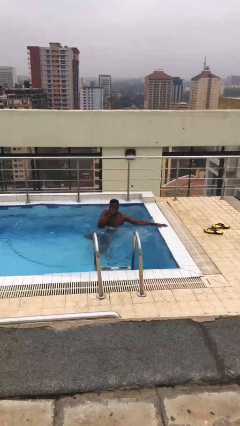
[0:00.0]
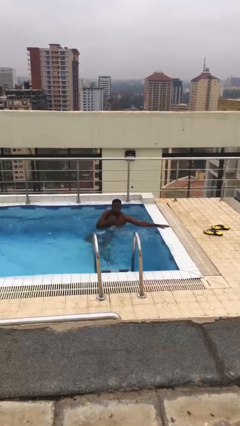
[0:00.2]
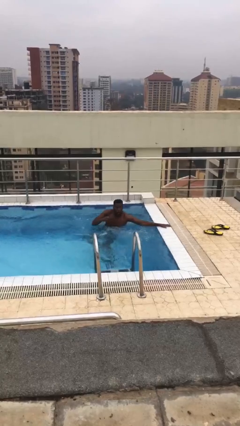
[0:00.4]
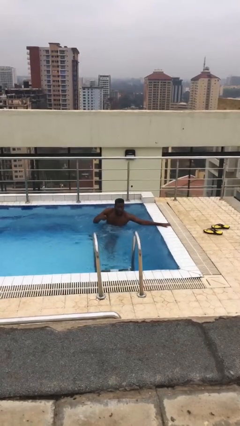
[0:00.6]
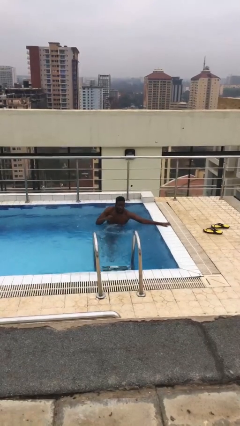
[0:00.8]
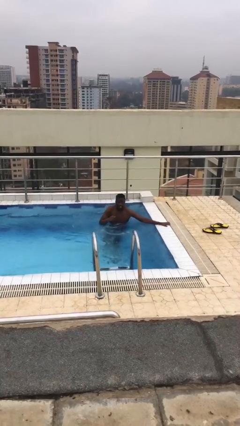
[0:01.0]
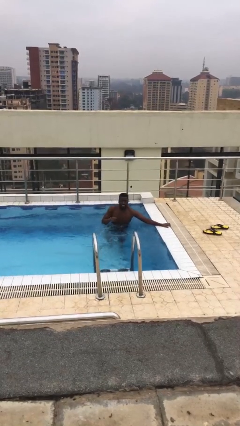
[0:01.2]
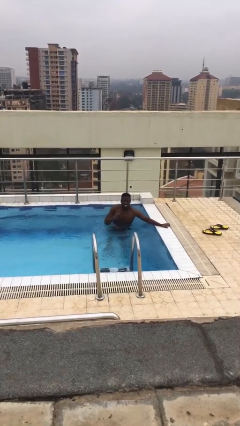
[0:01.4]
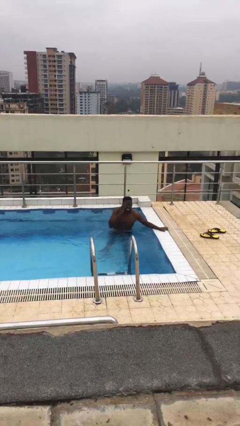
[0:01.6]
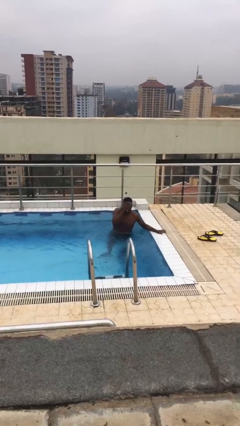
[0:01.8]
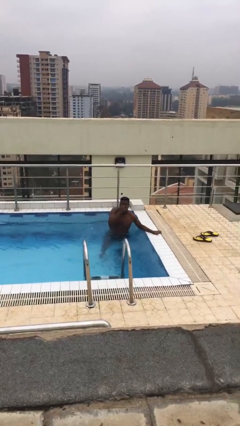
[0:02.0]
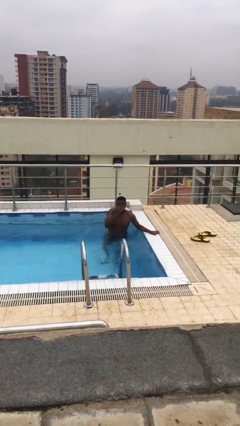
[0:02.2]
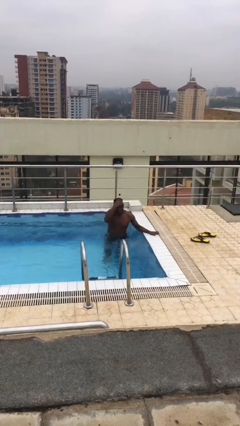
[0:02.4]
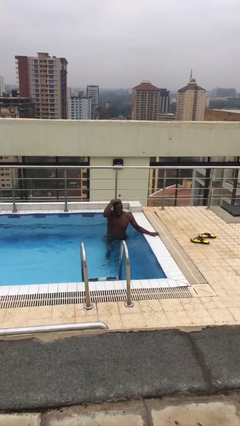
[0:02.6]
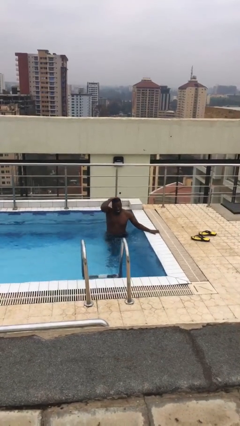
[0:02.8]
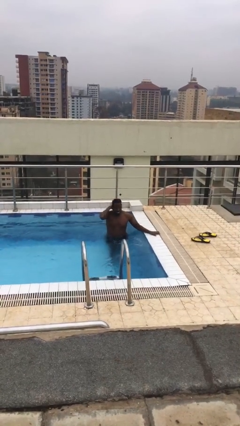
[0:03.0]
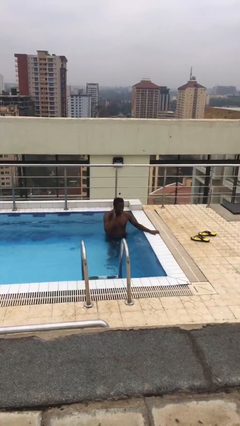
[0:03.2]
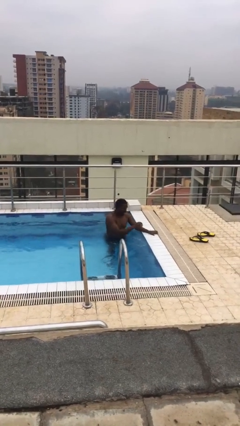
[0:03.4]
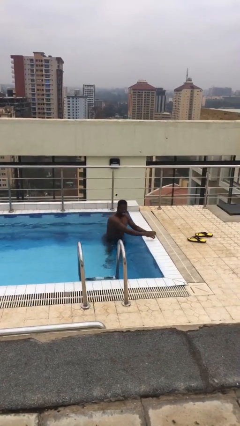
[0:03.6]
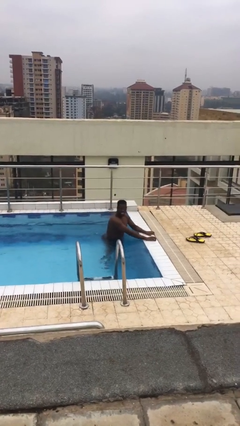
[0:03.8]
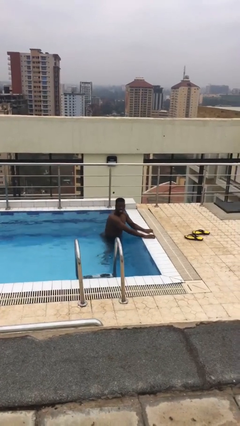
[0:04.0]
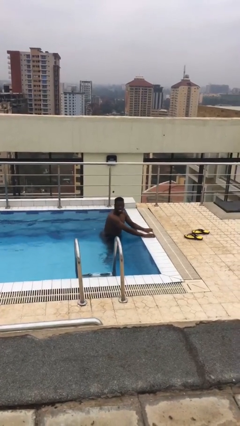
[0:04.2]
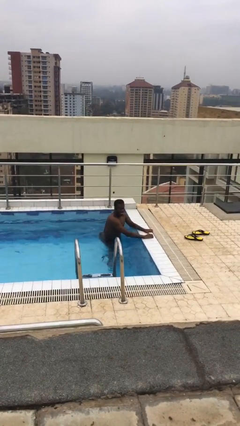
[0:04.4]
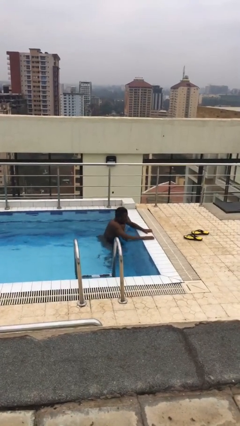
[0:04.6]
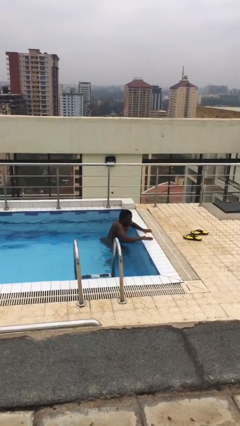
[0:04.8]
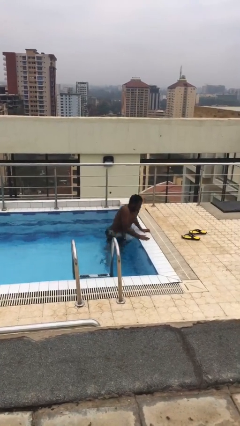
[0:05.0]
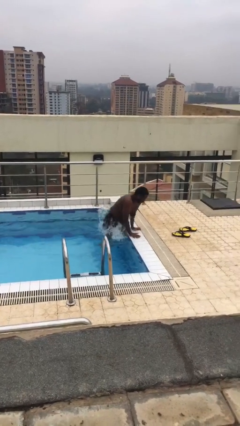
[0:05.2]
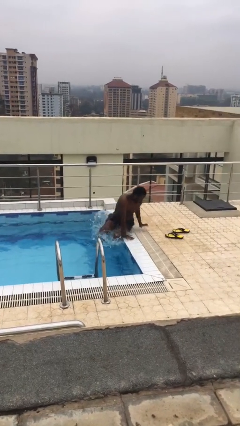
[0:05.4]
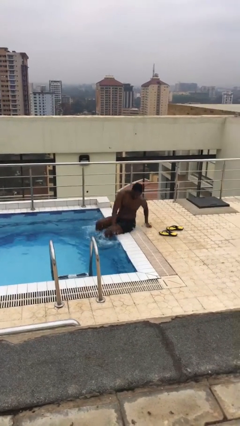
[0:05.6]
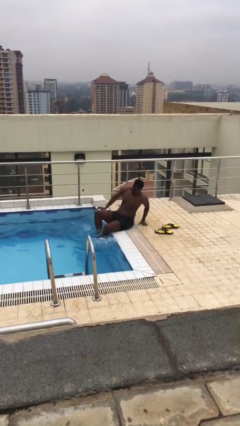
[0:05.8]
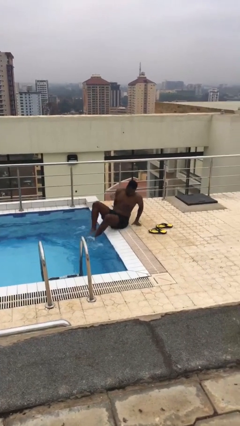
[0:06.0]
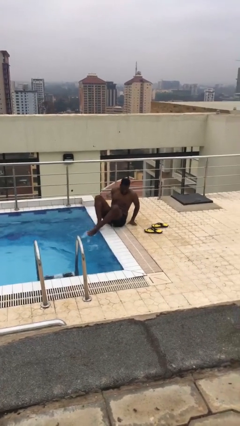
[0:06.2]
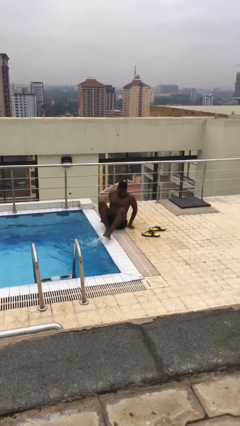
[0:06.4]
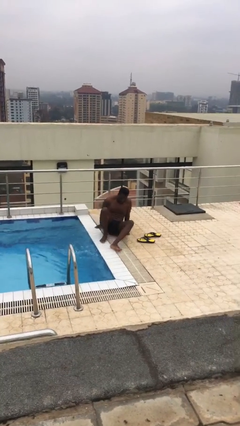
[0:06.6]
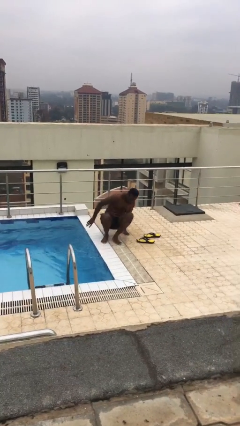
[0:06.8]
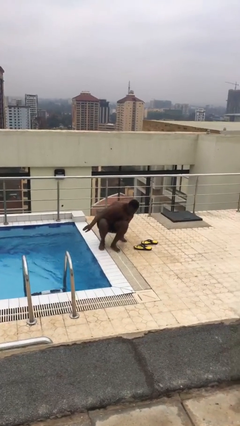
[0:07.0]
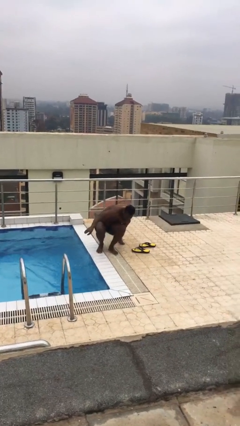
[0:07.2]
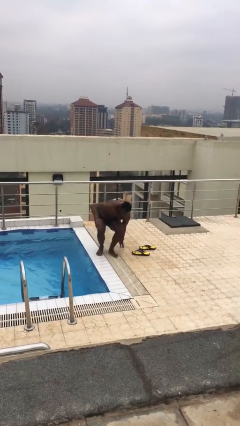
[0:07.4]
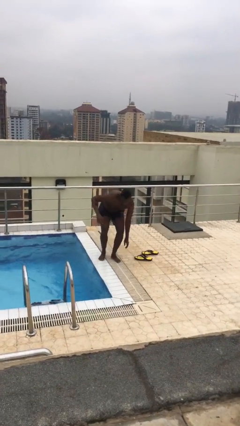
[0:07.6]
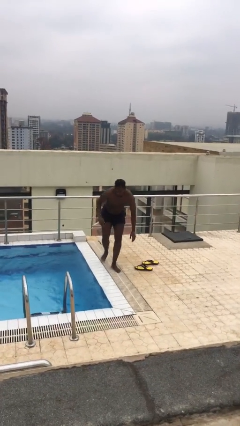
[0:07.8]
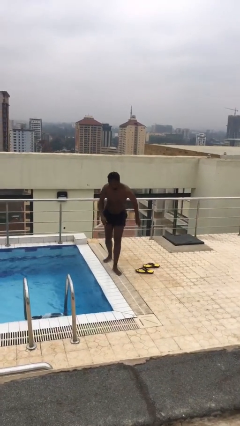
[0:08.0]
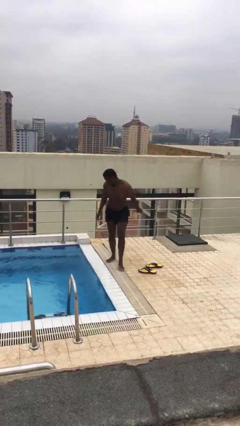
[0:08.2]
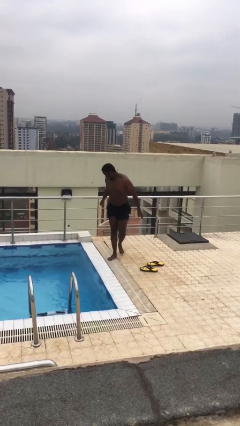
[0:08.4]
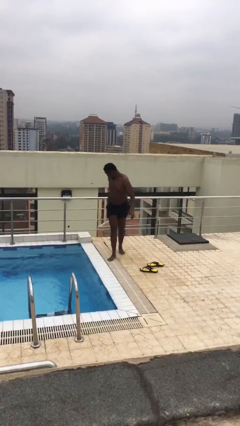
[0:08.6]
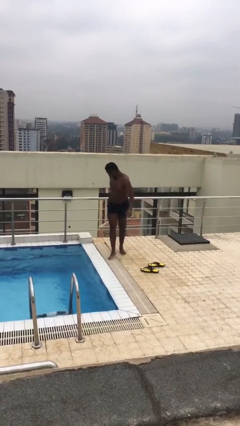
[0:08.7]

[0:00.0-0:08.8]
person exits pool

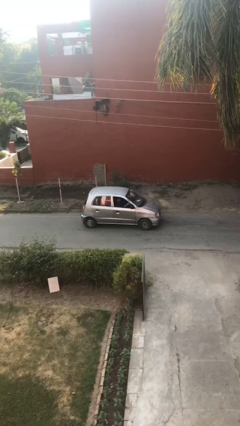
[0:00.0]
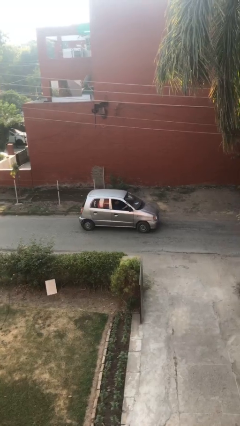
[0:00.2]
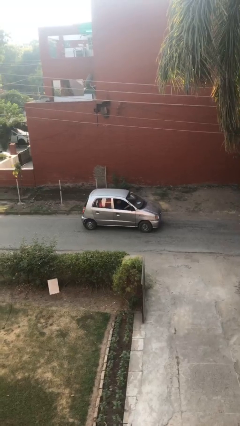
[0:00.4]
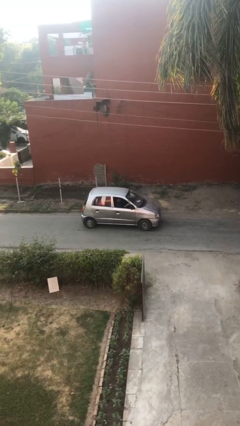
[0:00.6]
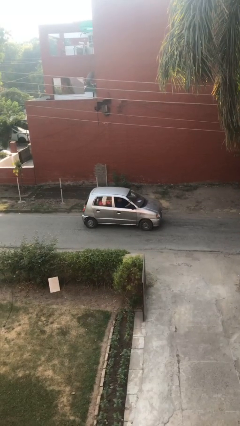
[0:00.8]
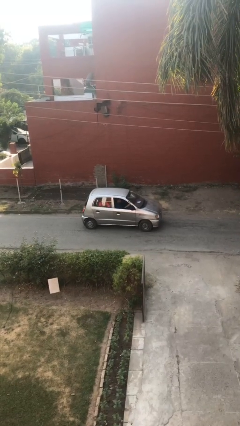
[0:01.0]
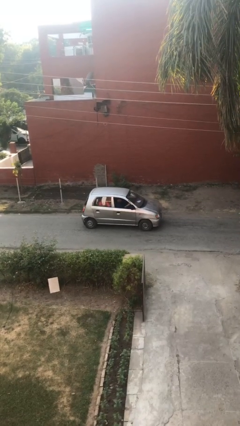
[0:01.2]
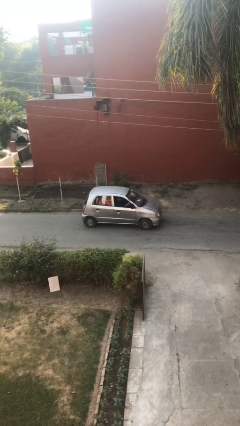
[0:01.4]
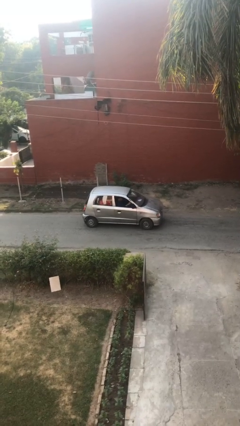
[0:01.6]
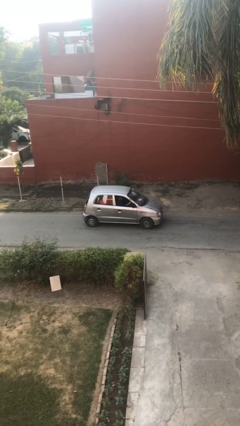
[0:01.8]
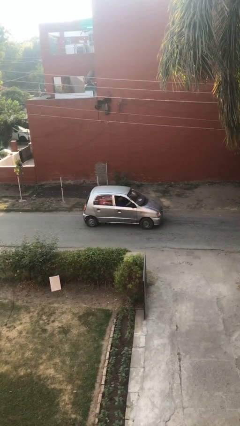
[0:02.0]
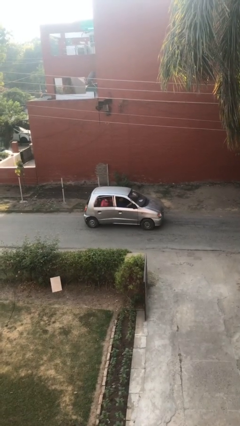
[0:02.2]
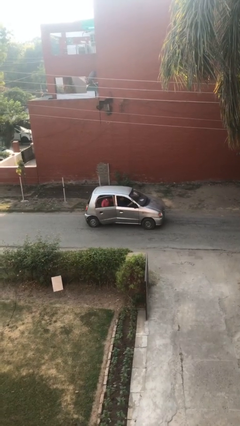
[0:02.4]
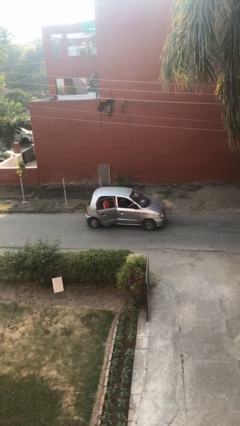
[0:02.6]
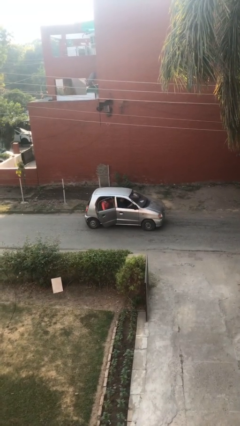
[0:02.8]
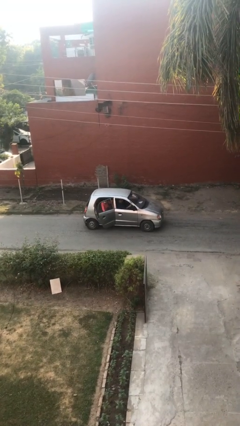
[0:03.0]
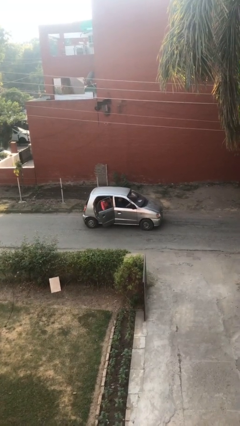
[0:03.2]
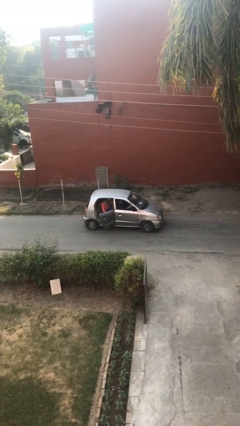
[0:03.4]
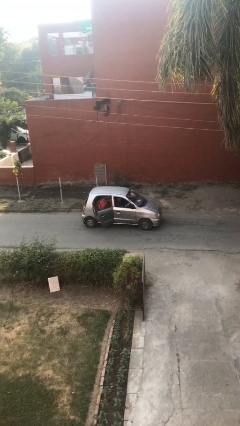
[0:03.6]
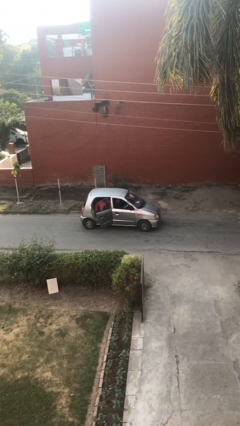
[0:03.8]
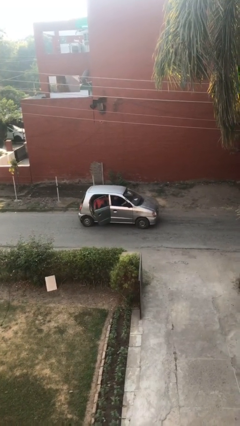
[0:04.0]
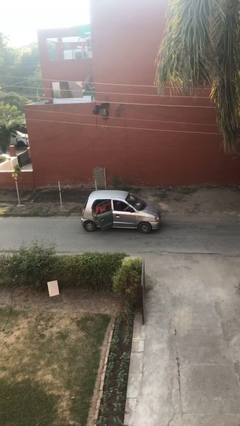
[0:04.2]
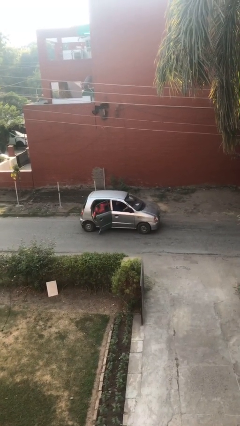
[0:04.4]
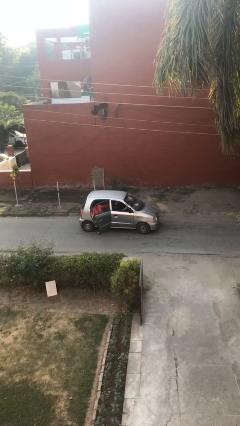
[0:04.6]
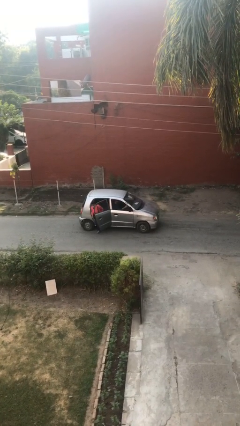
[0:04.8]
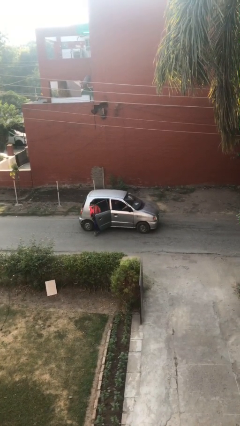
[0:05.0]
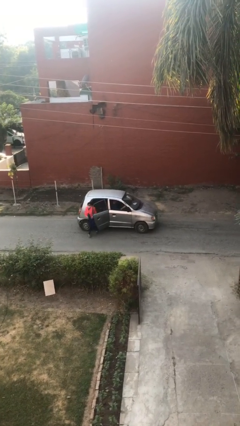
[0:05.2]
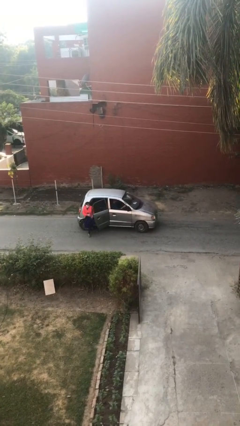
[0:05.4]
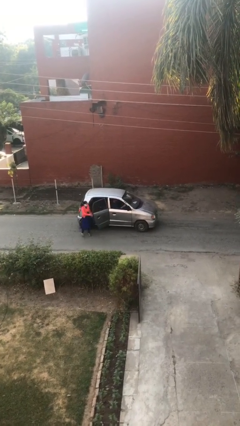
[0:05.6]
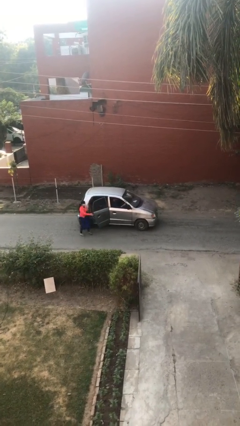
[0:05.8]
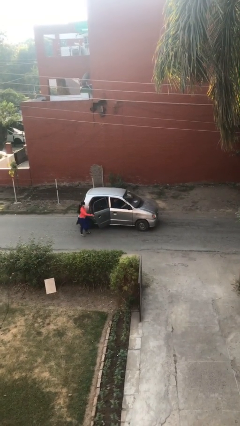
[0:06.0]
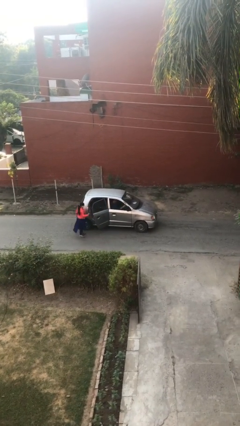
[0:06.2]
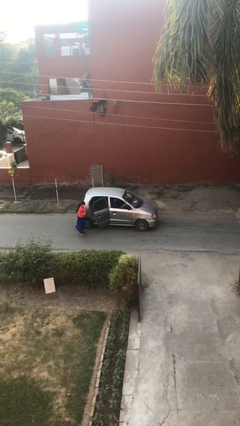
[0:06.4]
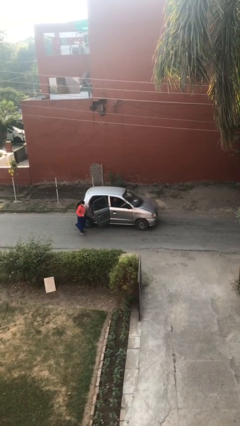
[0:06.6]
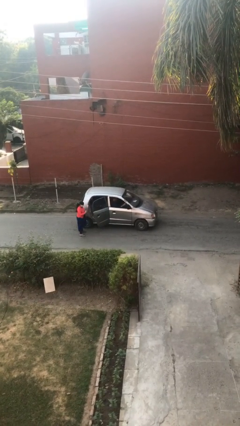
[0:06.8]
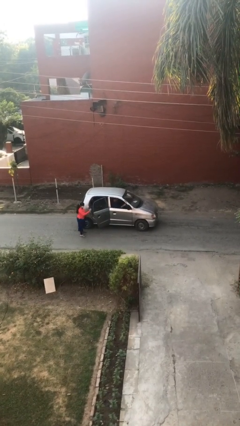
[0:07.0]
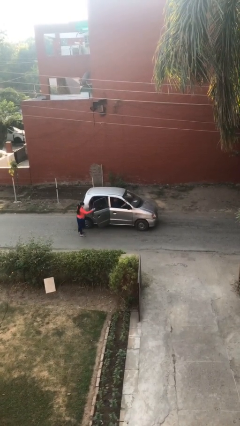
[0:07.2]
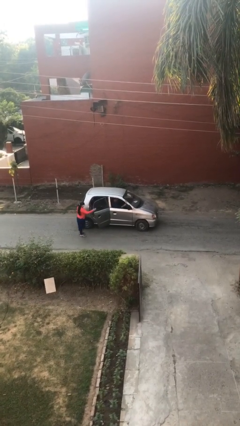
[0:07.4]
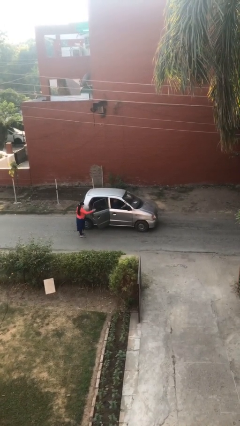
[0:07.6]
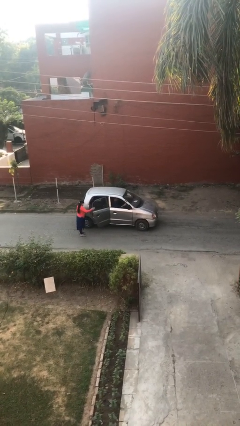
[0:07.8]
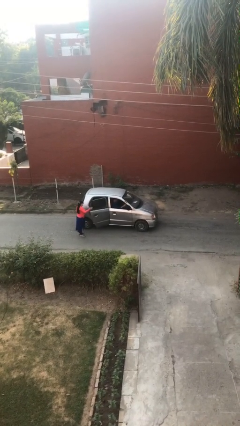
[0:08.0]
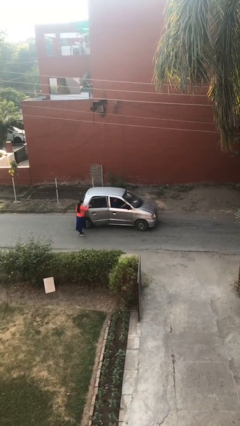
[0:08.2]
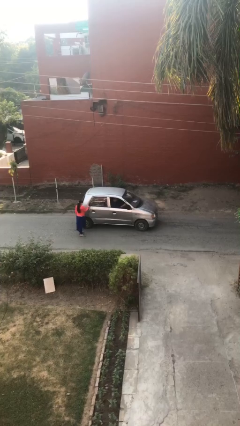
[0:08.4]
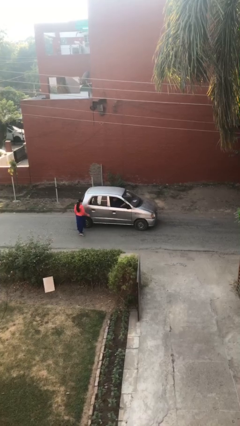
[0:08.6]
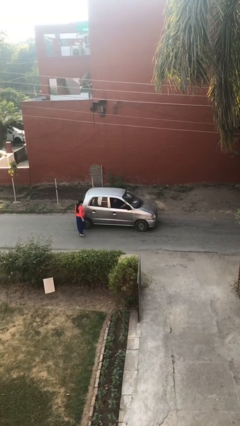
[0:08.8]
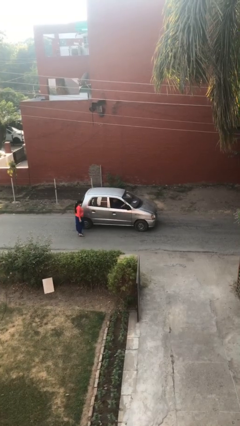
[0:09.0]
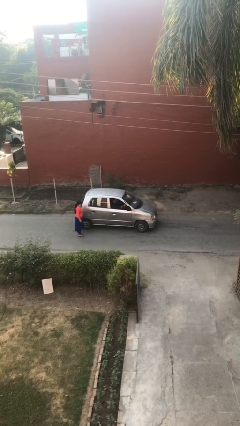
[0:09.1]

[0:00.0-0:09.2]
car drops off person

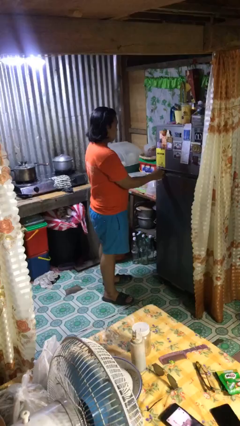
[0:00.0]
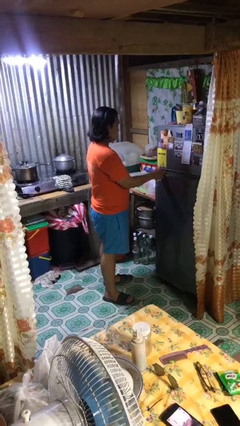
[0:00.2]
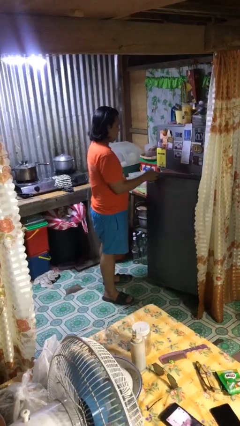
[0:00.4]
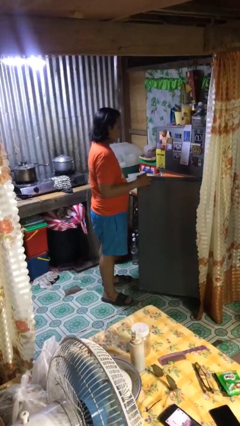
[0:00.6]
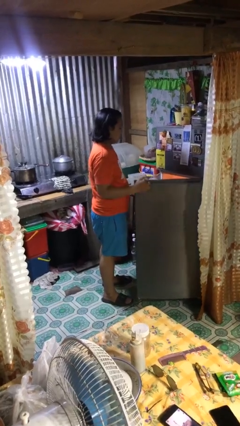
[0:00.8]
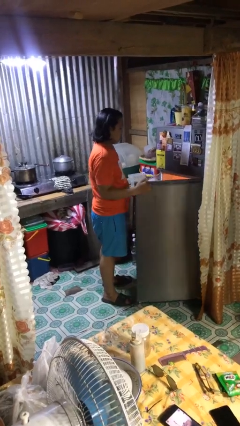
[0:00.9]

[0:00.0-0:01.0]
person opens refrigerator
